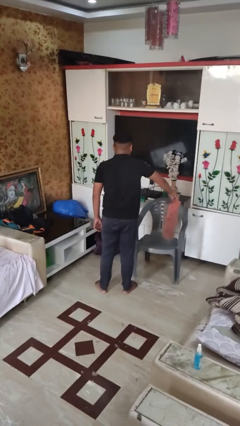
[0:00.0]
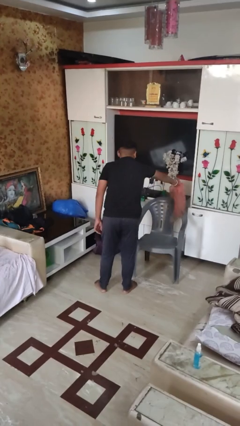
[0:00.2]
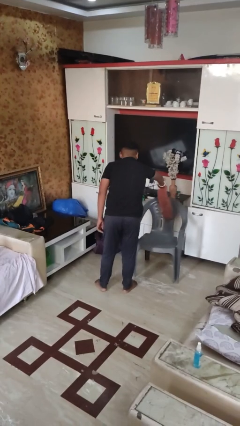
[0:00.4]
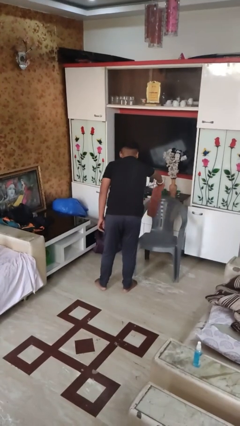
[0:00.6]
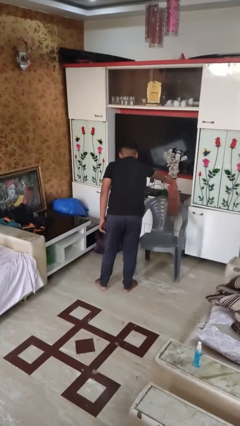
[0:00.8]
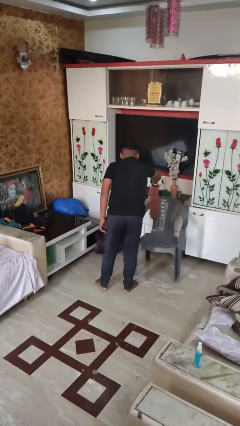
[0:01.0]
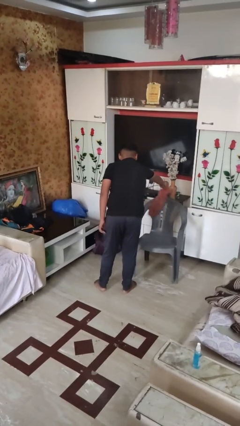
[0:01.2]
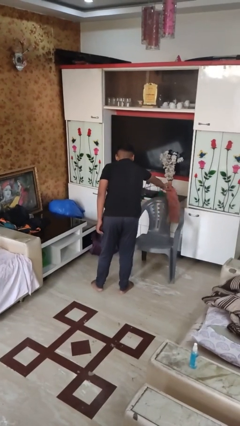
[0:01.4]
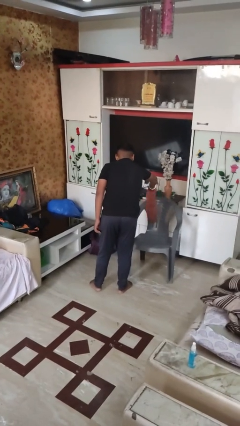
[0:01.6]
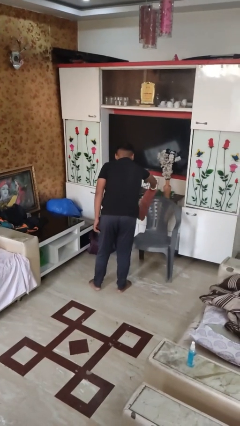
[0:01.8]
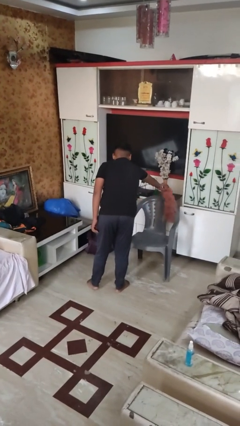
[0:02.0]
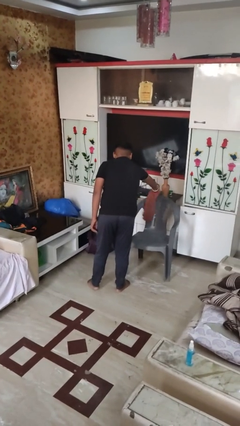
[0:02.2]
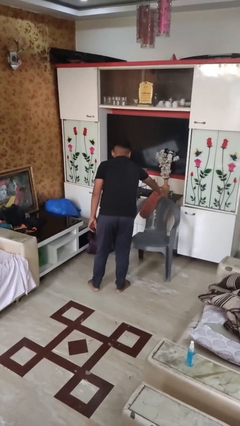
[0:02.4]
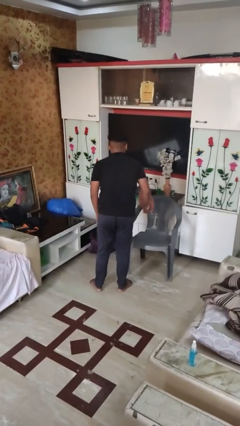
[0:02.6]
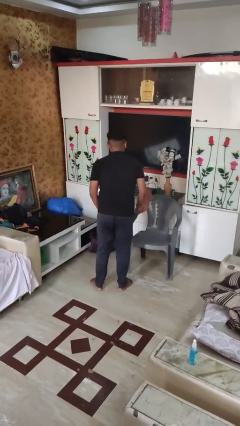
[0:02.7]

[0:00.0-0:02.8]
person dusts furniture

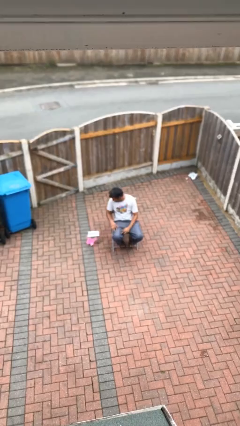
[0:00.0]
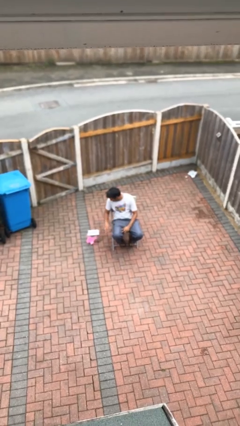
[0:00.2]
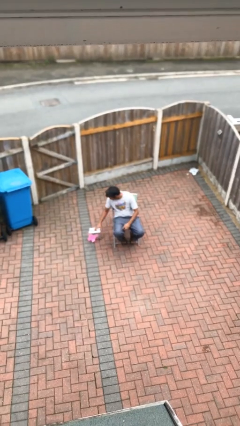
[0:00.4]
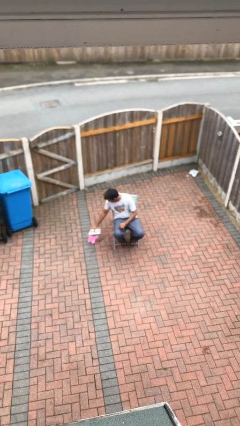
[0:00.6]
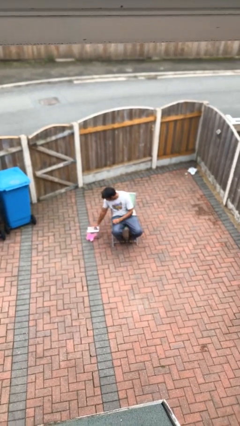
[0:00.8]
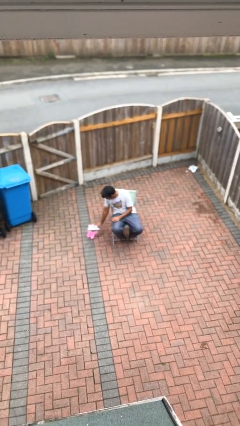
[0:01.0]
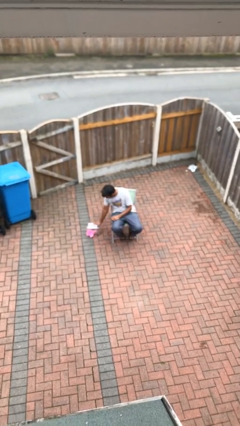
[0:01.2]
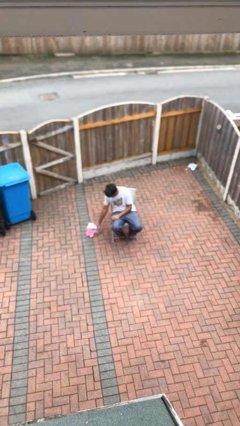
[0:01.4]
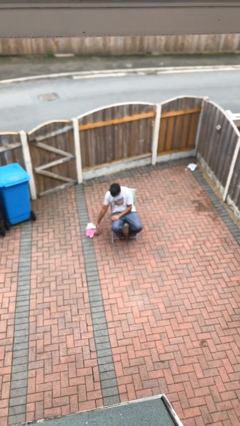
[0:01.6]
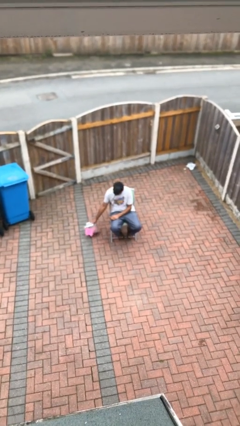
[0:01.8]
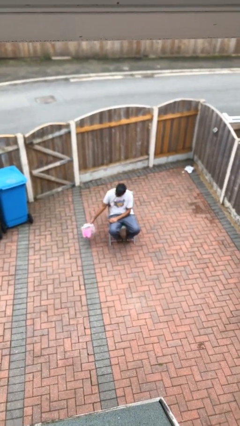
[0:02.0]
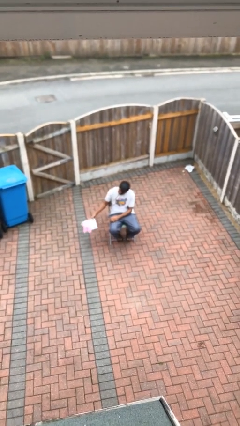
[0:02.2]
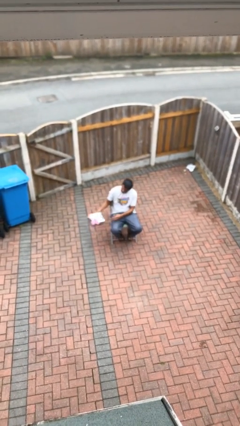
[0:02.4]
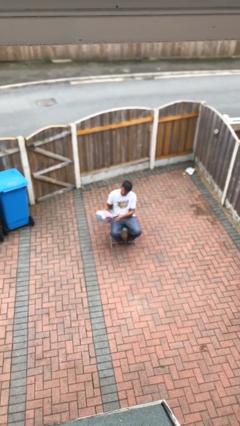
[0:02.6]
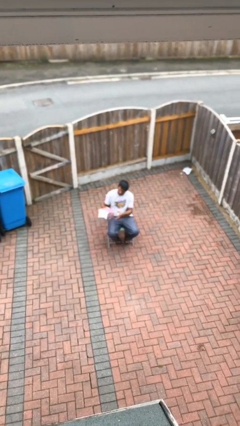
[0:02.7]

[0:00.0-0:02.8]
person picks up object from floor

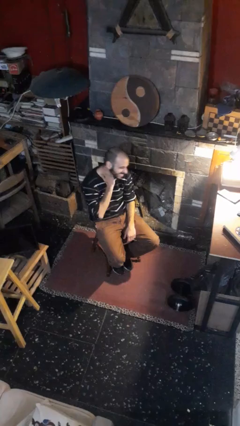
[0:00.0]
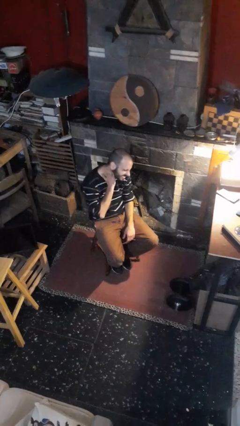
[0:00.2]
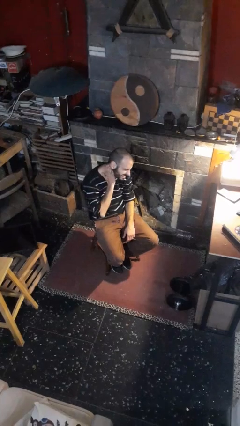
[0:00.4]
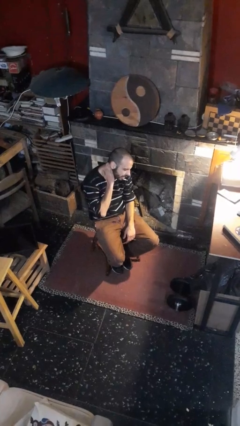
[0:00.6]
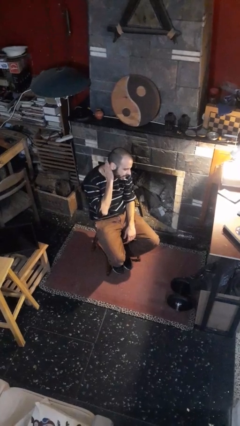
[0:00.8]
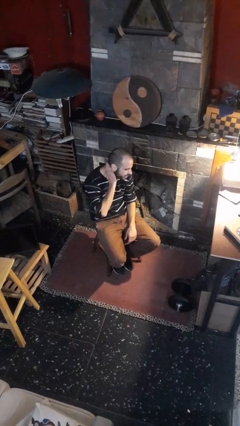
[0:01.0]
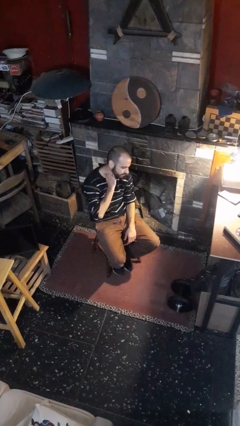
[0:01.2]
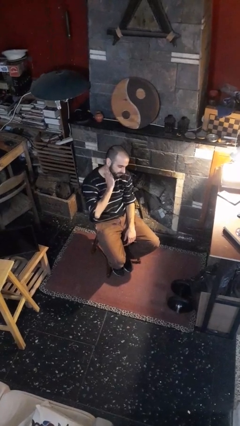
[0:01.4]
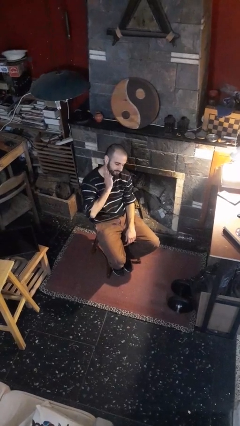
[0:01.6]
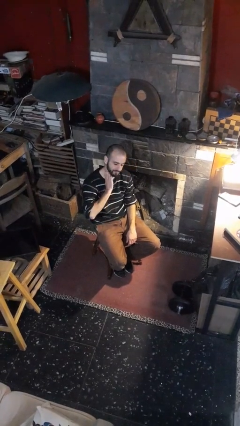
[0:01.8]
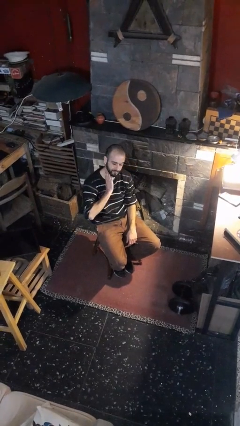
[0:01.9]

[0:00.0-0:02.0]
person swats bug

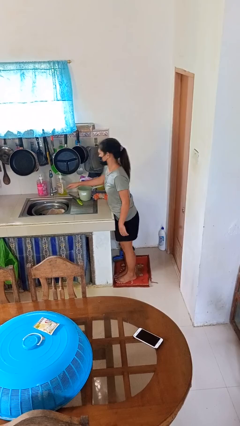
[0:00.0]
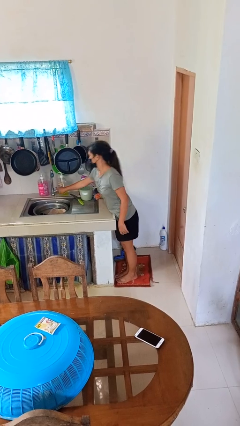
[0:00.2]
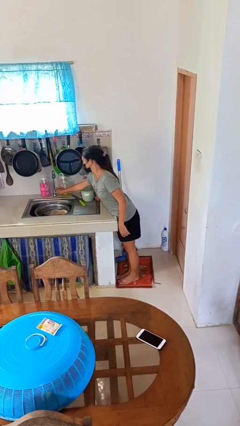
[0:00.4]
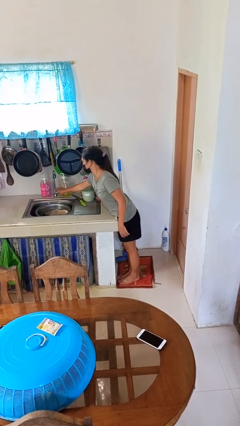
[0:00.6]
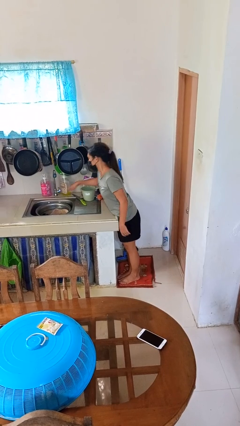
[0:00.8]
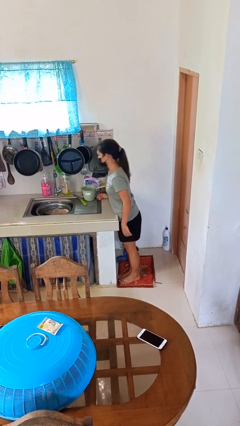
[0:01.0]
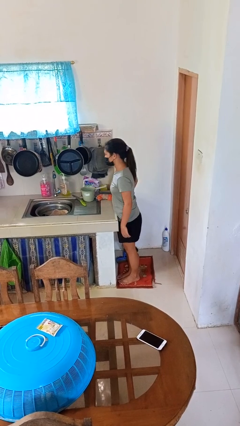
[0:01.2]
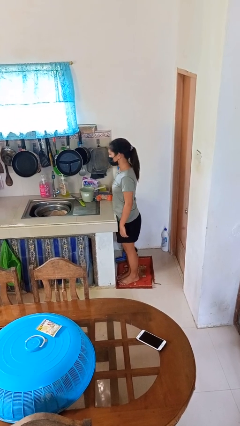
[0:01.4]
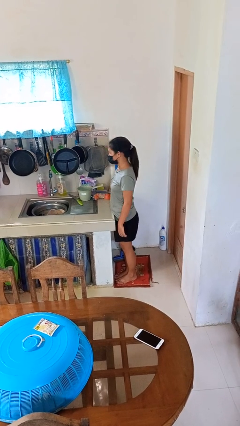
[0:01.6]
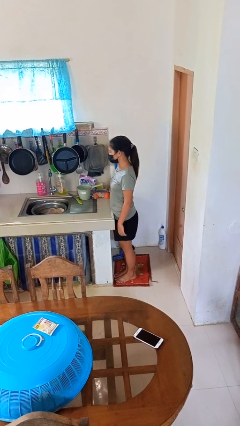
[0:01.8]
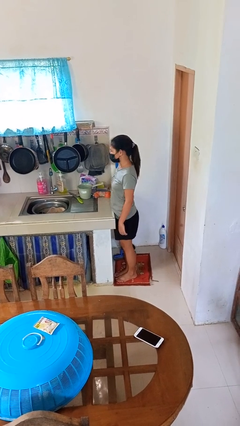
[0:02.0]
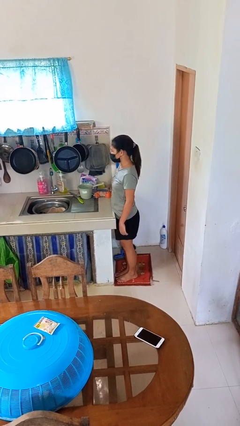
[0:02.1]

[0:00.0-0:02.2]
person turns off faucet

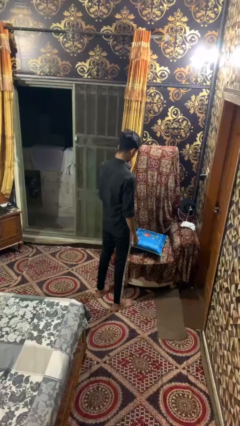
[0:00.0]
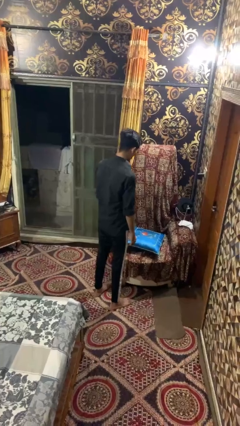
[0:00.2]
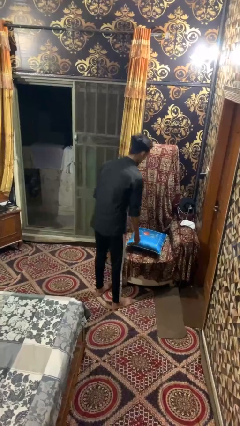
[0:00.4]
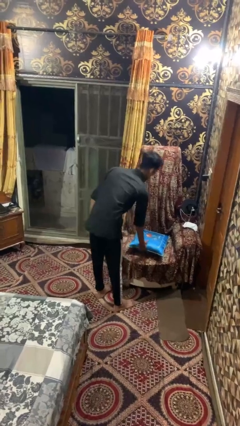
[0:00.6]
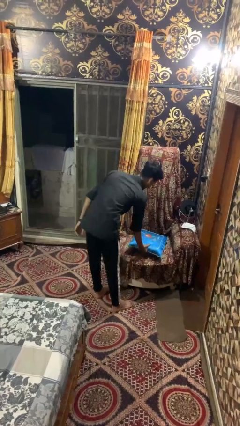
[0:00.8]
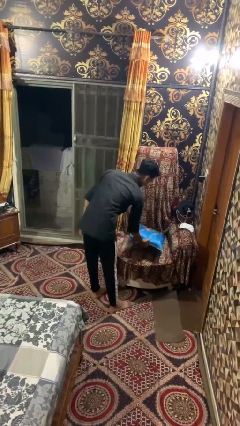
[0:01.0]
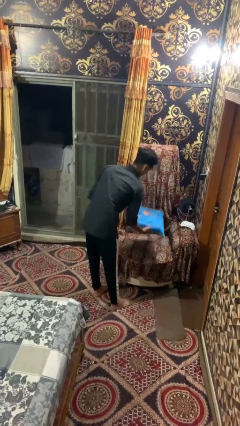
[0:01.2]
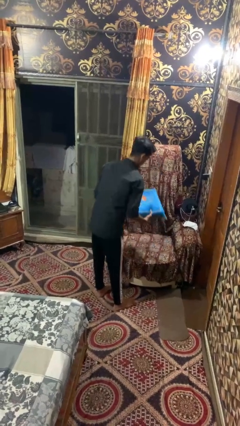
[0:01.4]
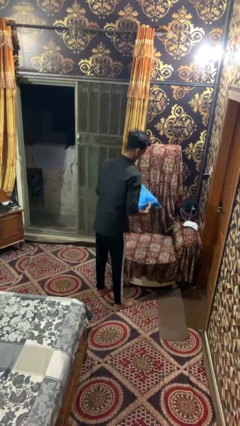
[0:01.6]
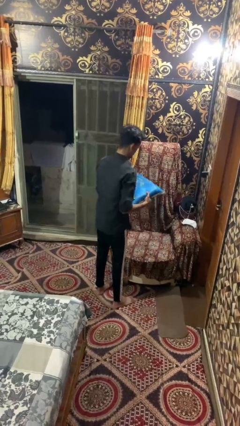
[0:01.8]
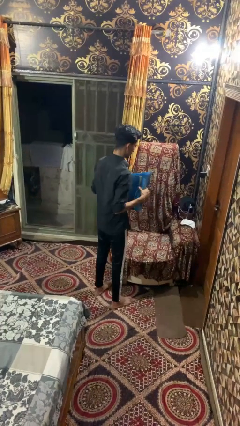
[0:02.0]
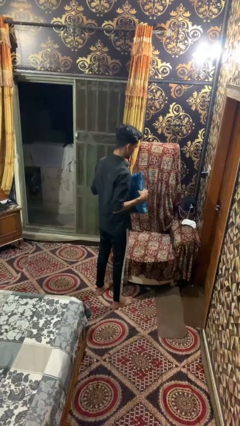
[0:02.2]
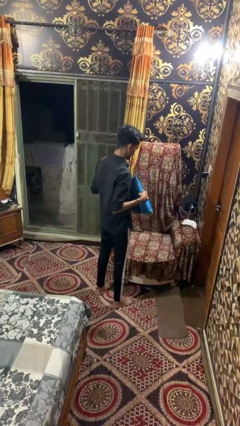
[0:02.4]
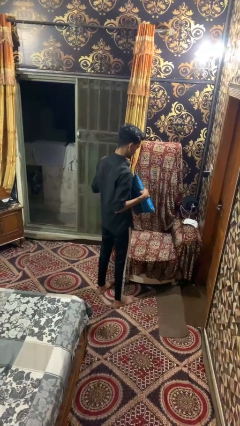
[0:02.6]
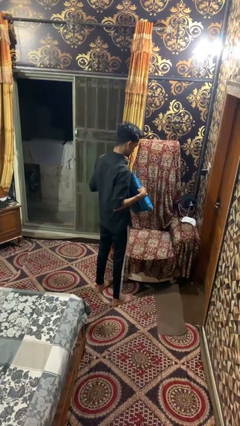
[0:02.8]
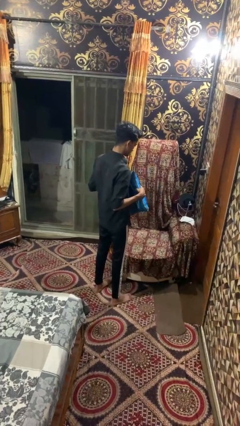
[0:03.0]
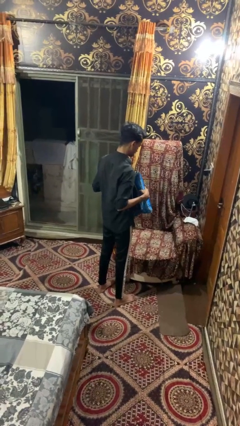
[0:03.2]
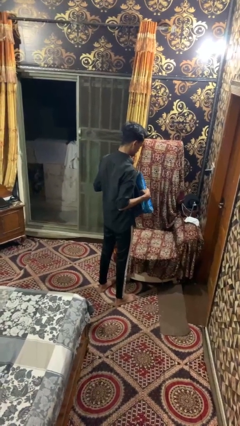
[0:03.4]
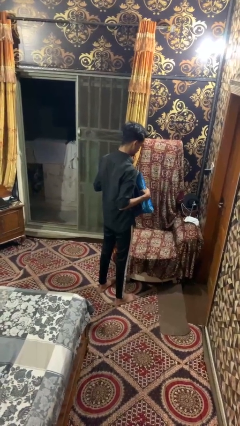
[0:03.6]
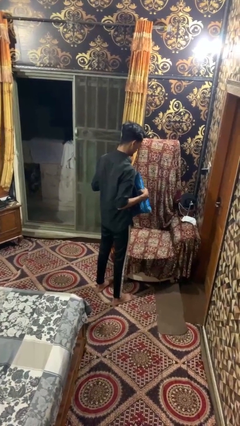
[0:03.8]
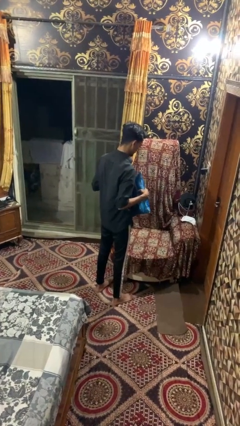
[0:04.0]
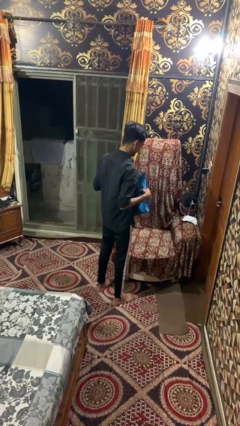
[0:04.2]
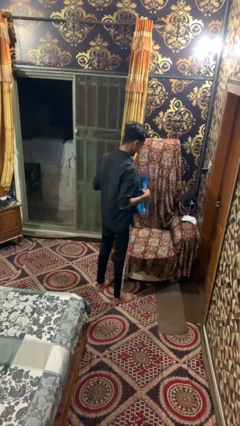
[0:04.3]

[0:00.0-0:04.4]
person picks up object from couch

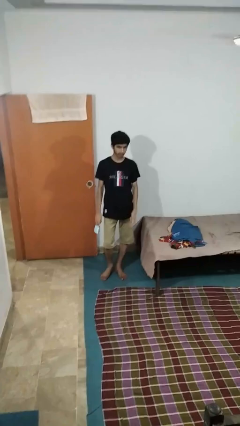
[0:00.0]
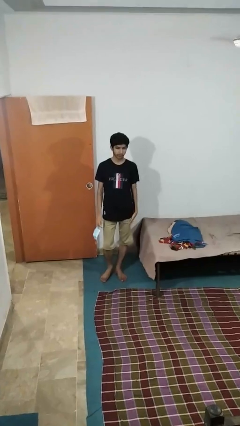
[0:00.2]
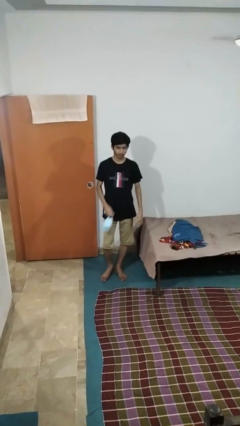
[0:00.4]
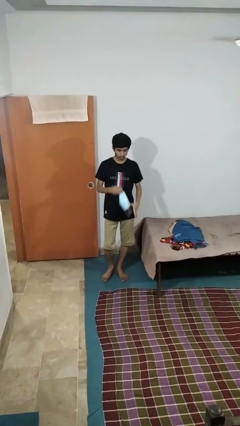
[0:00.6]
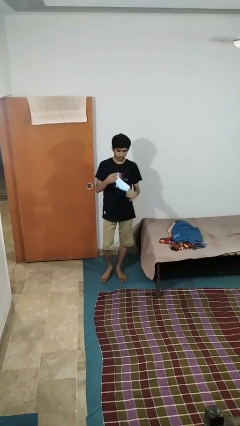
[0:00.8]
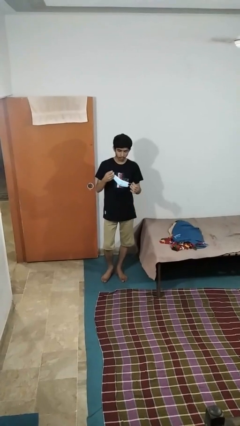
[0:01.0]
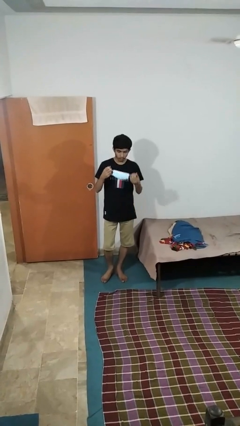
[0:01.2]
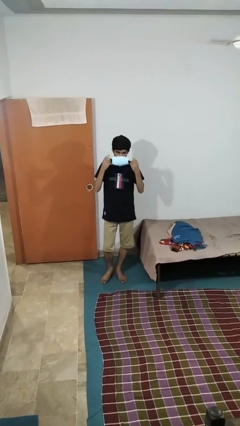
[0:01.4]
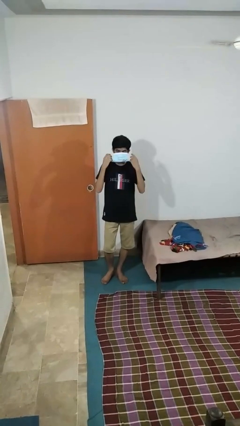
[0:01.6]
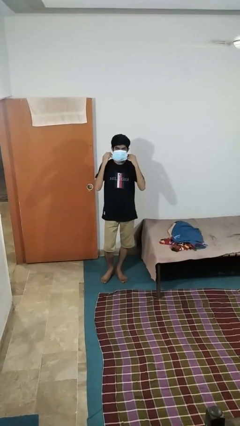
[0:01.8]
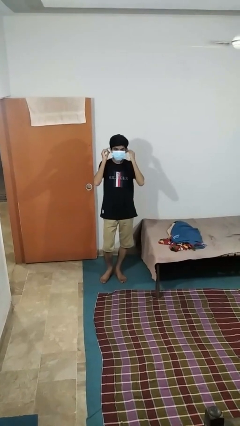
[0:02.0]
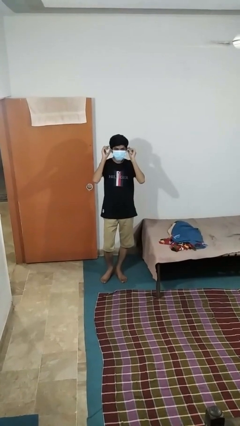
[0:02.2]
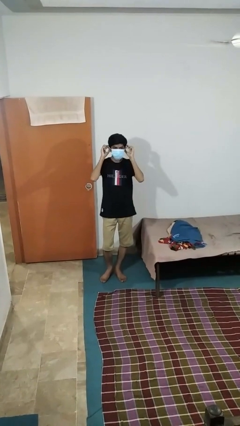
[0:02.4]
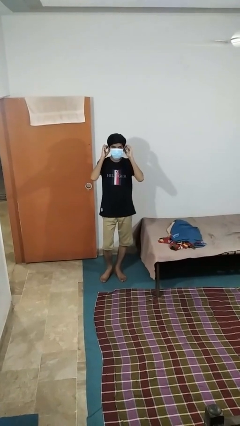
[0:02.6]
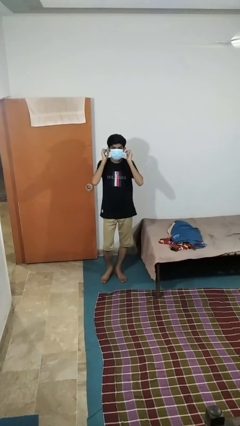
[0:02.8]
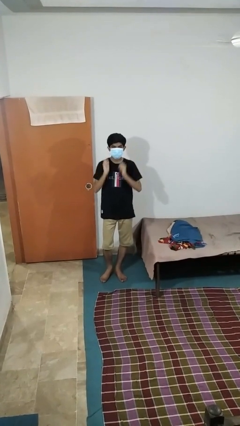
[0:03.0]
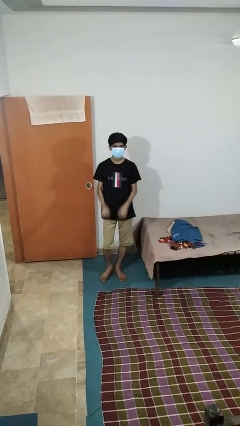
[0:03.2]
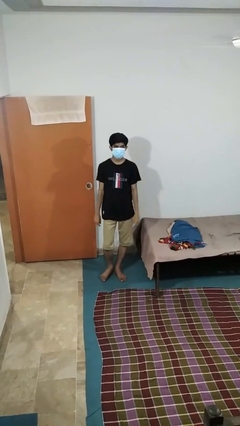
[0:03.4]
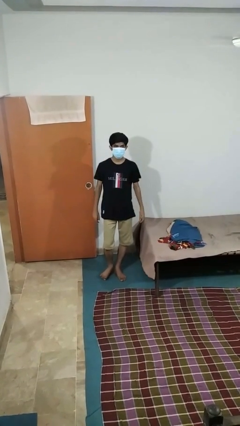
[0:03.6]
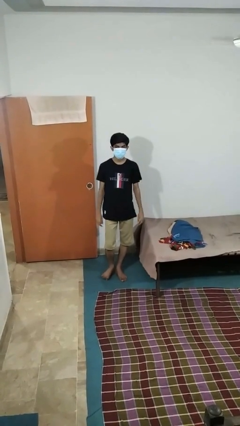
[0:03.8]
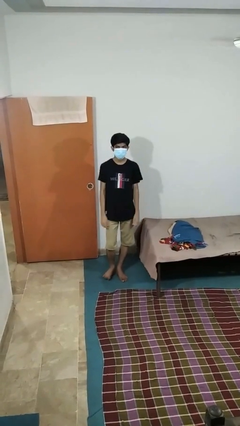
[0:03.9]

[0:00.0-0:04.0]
person puts on facemask
